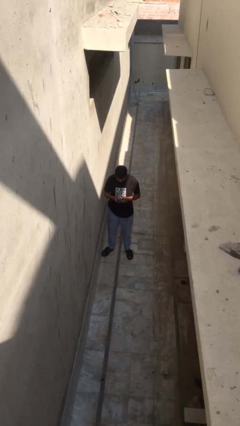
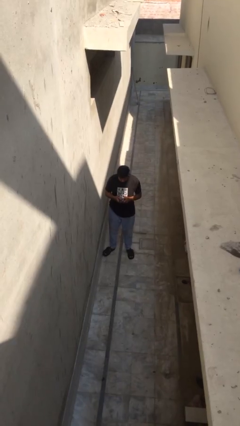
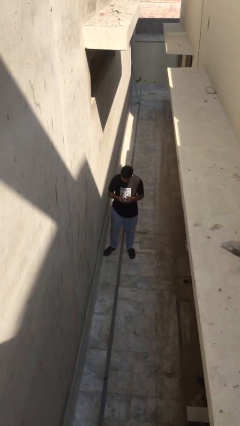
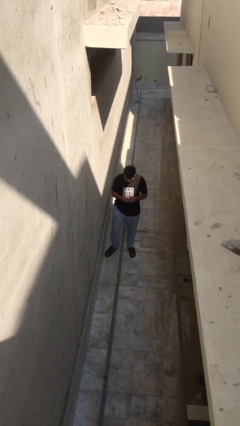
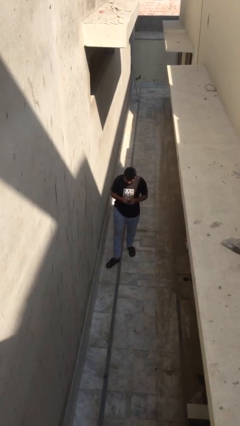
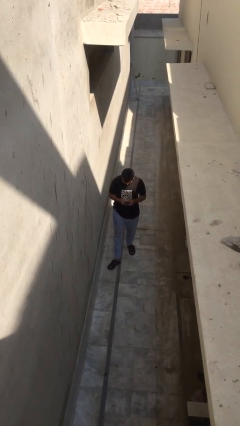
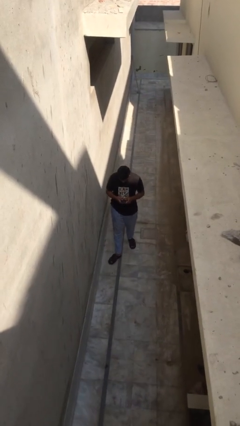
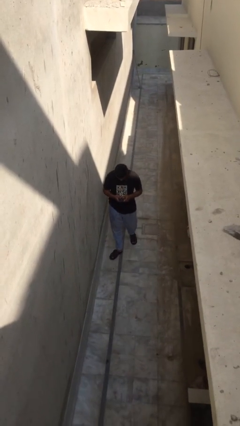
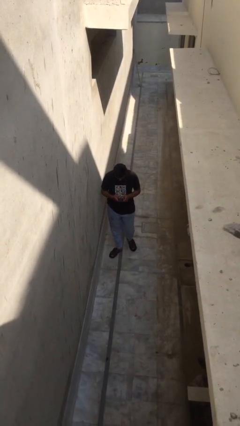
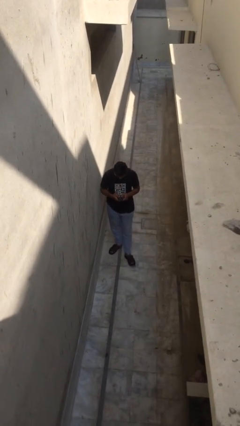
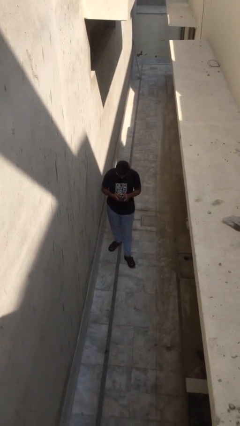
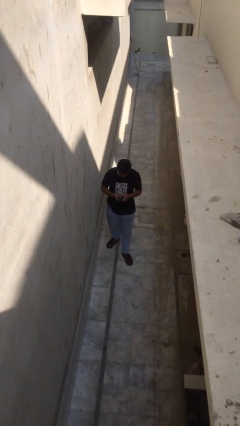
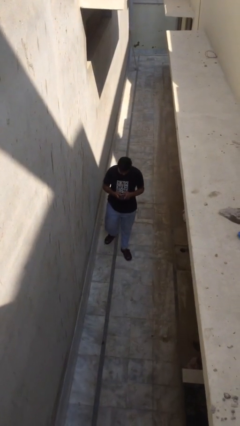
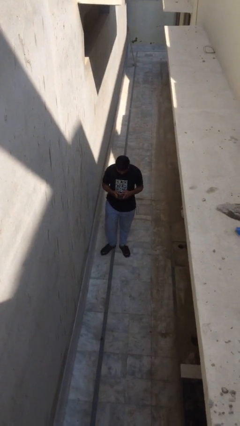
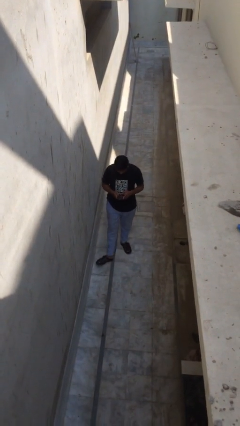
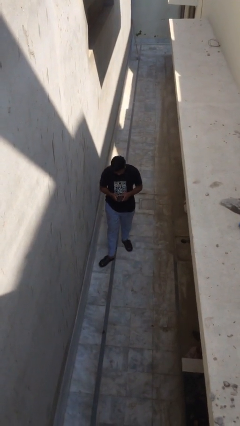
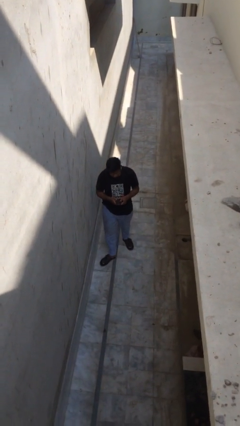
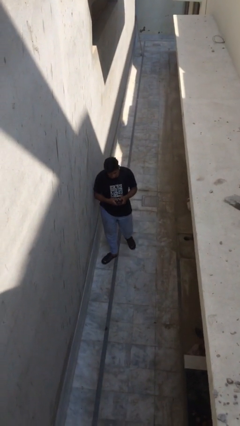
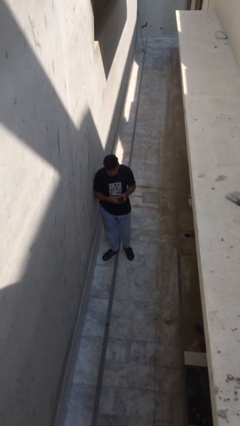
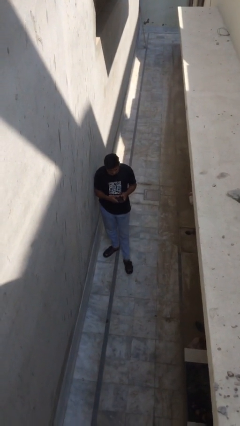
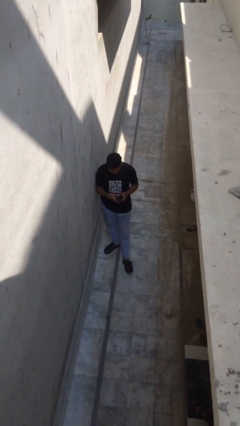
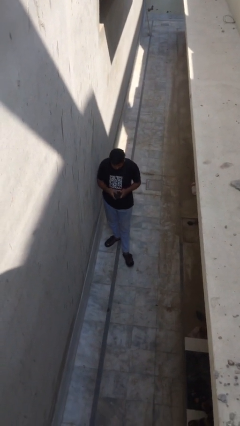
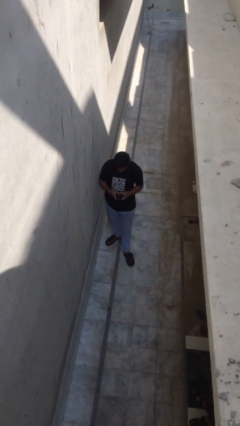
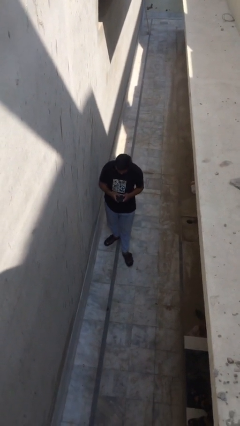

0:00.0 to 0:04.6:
person texts on phone

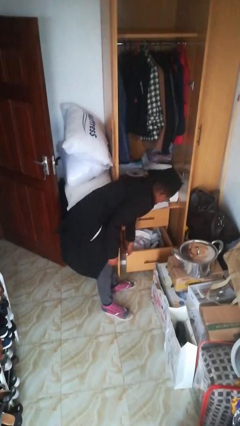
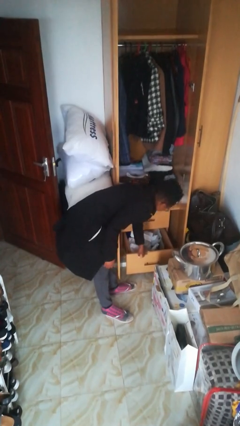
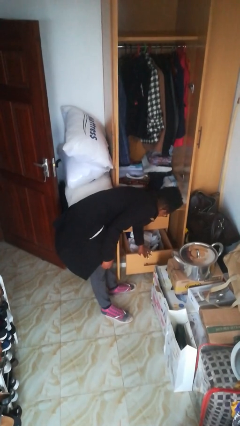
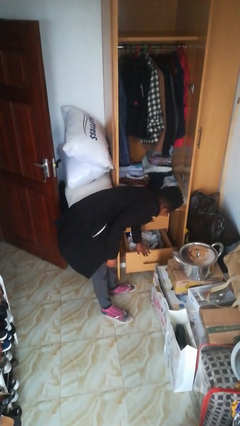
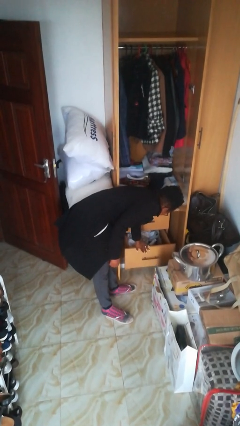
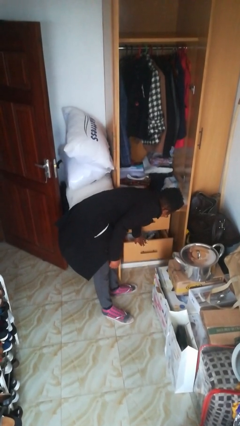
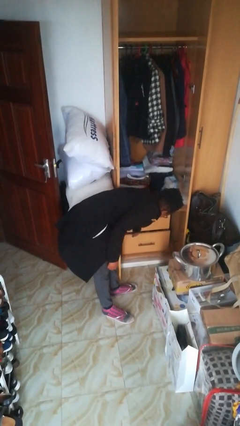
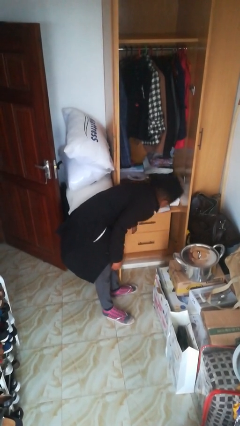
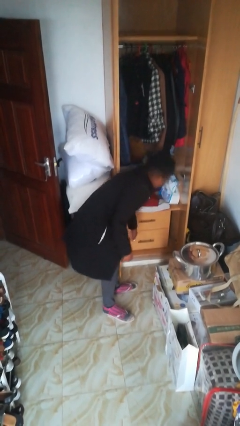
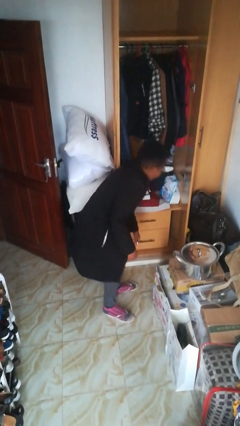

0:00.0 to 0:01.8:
person closes dresser drawer

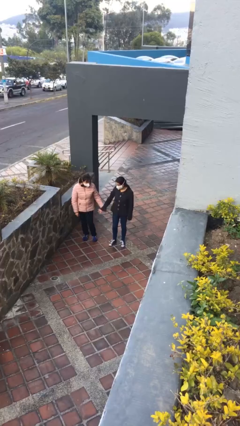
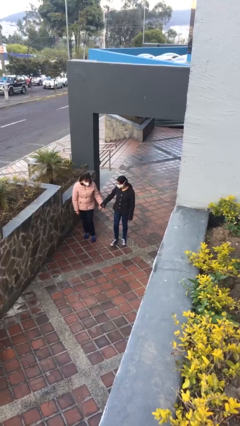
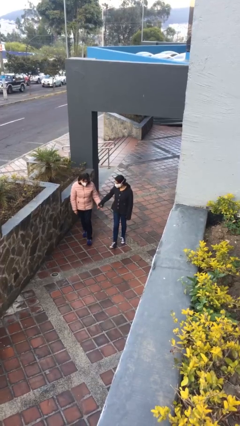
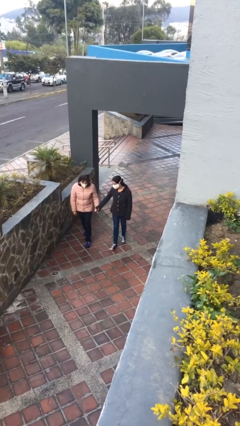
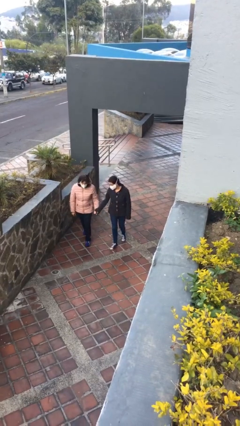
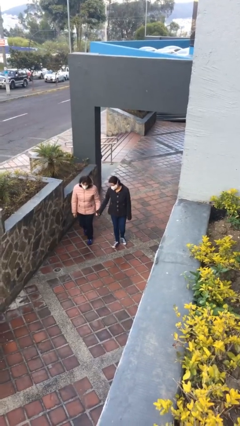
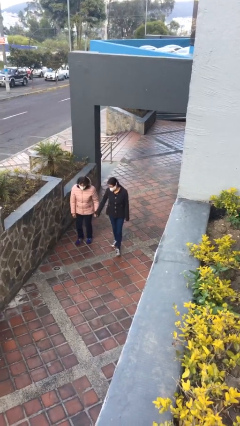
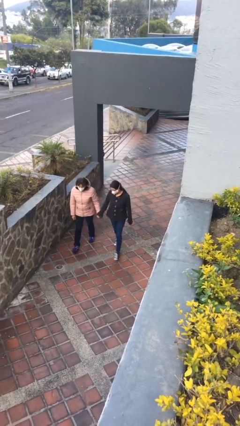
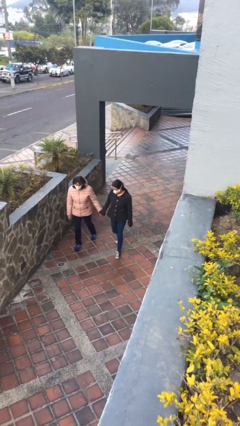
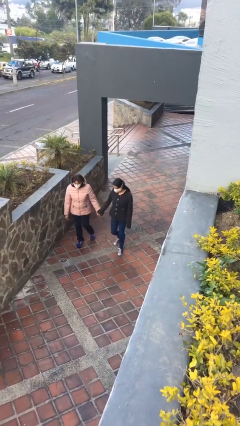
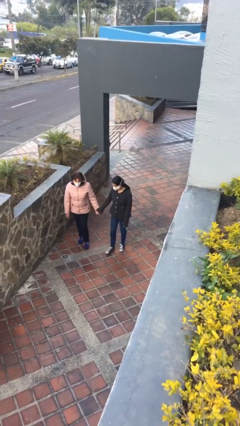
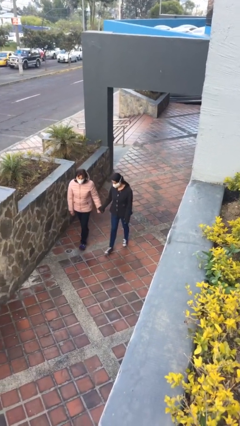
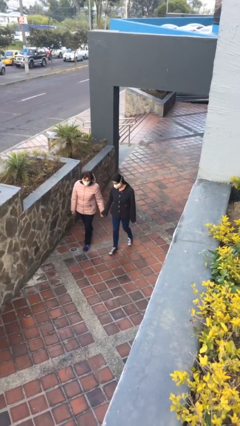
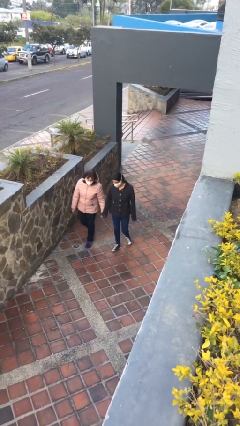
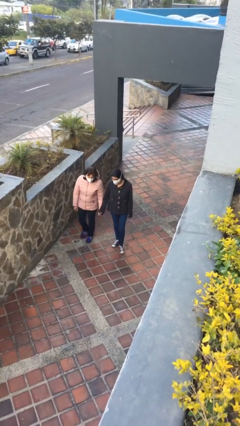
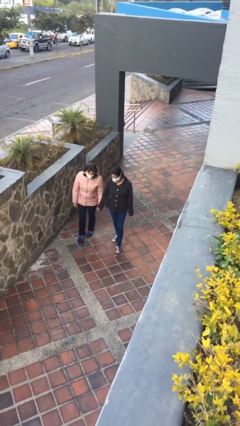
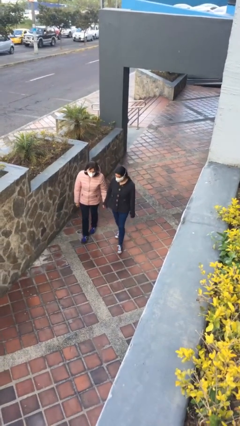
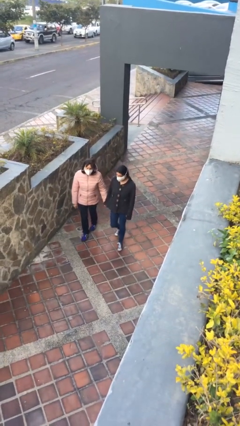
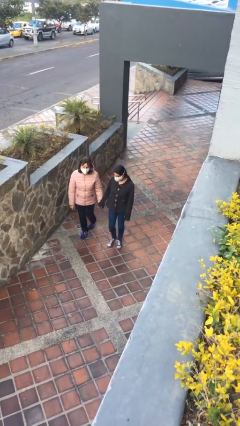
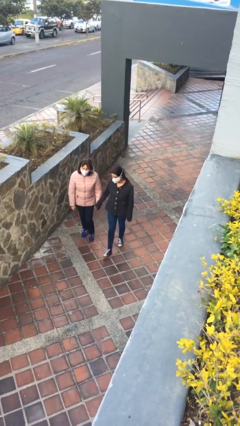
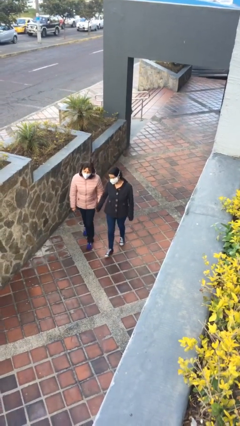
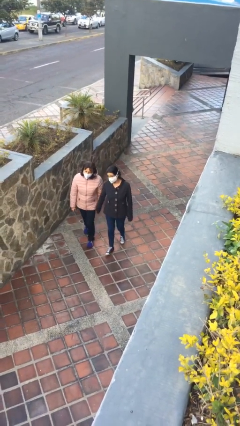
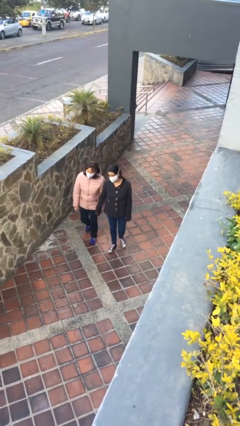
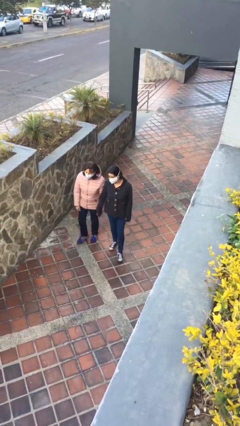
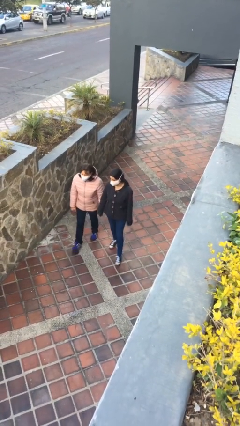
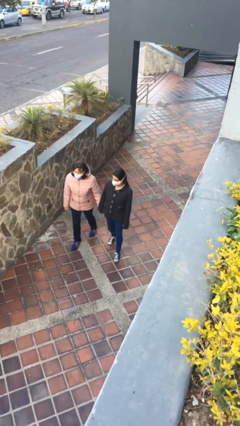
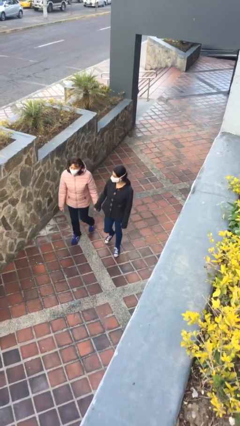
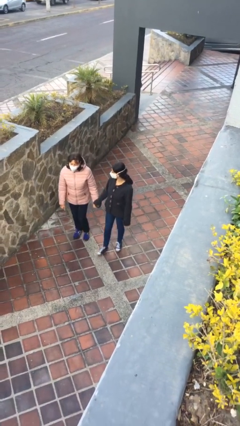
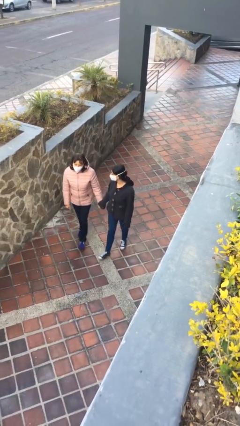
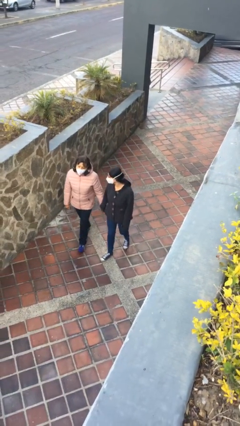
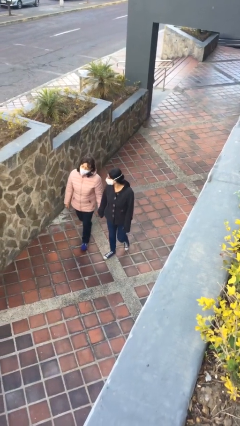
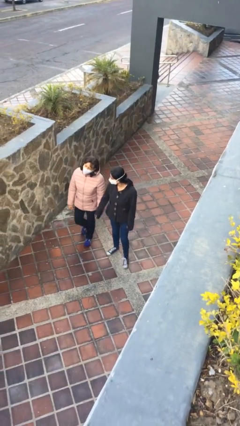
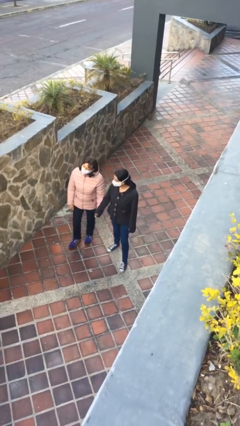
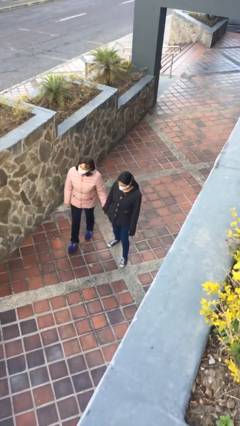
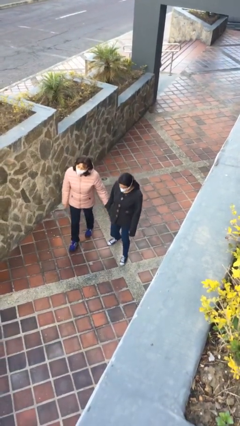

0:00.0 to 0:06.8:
person holds hand

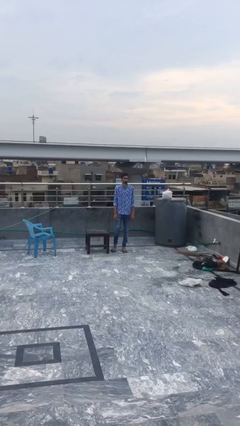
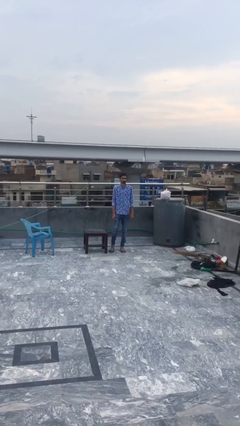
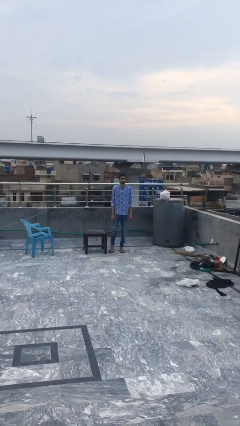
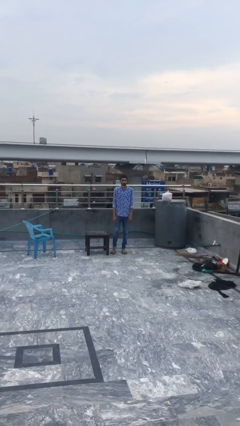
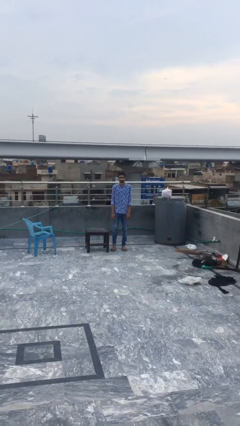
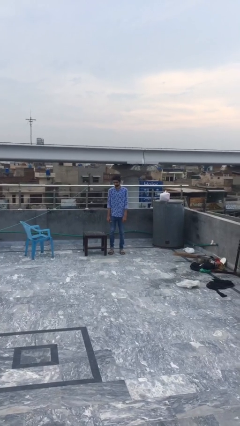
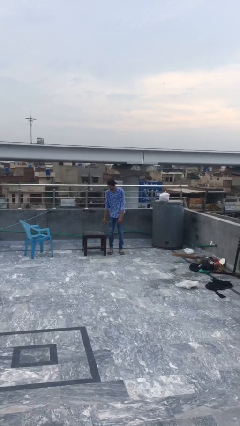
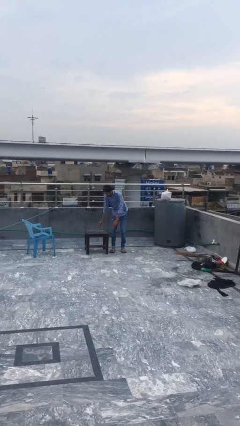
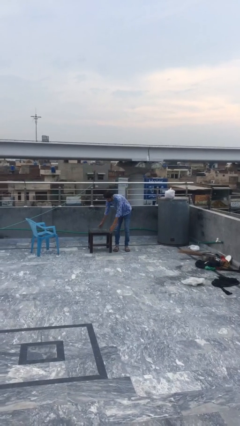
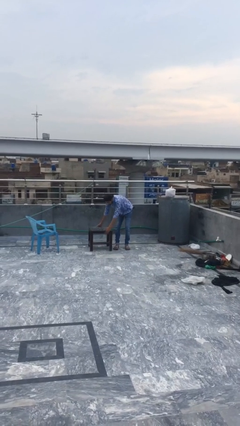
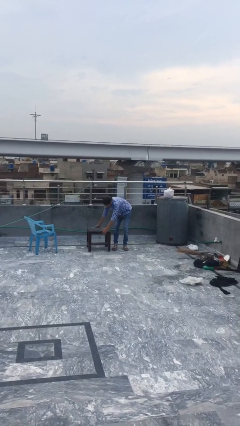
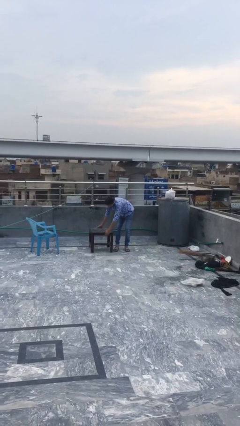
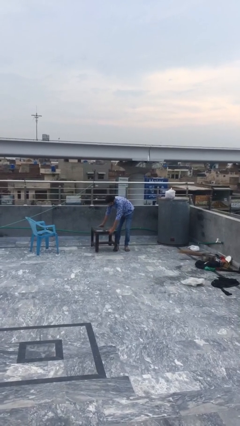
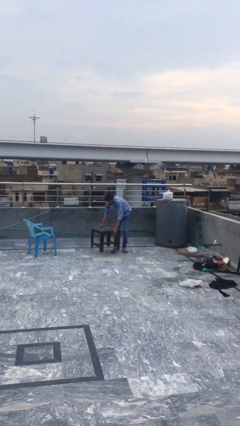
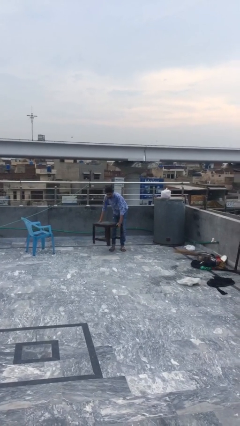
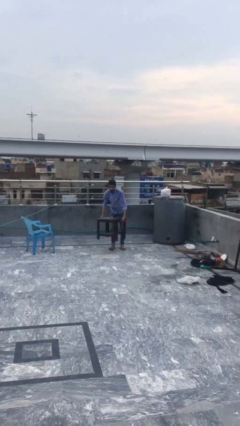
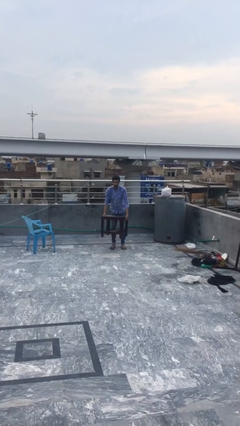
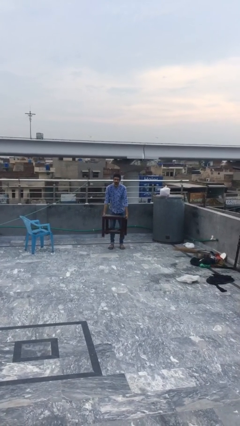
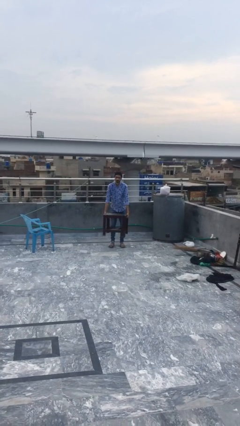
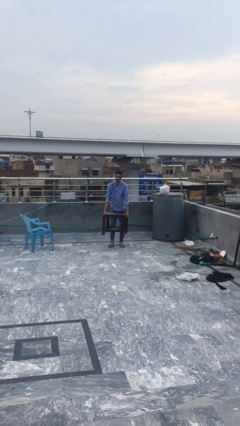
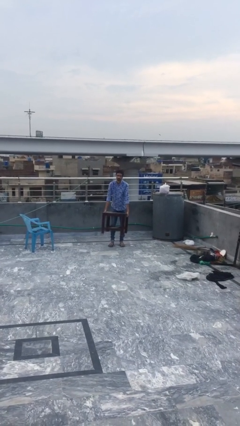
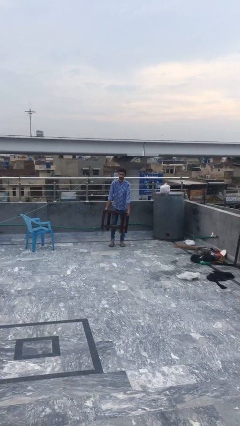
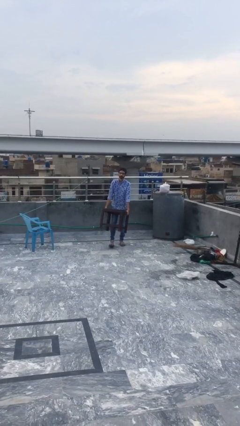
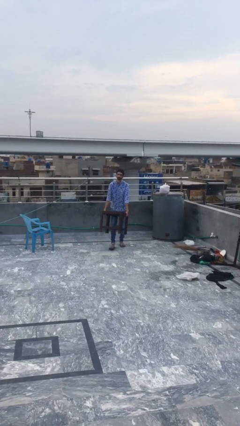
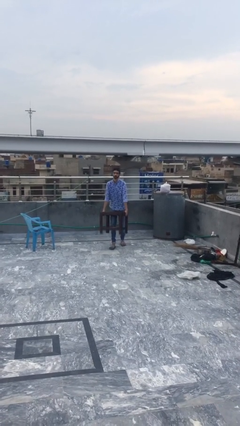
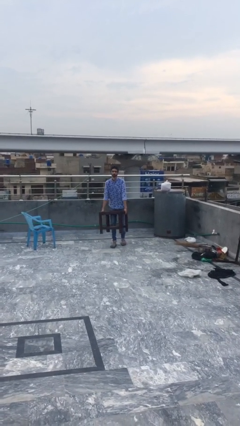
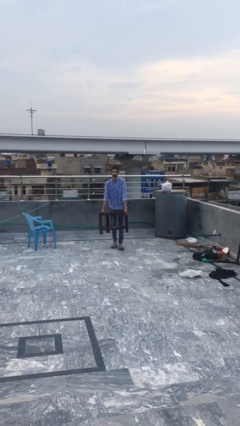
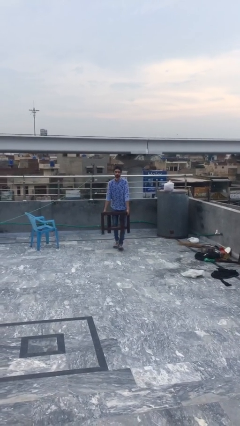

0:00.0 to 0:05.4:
person carries heavy object
